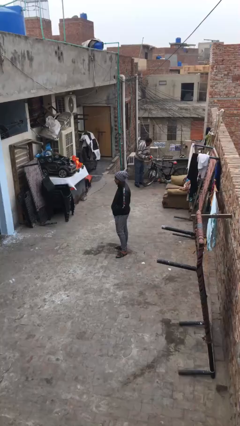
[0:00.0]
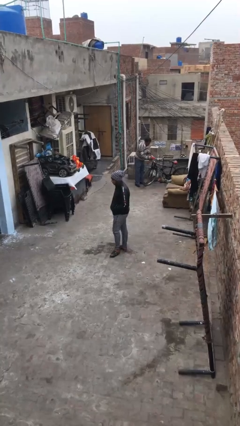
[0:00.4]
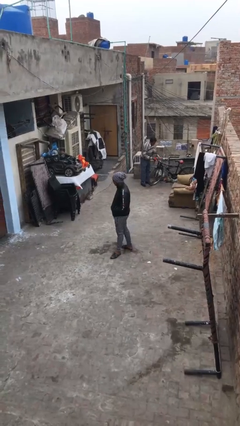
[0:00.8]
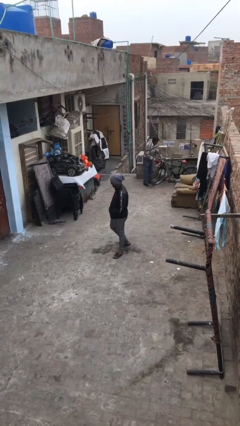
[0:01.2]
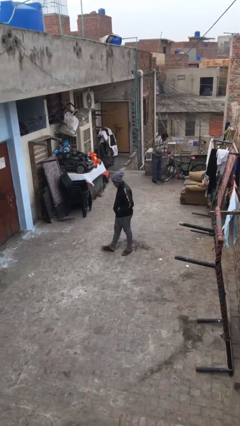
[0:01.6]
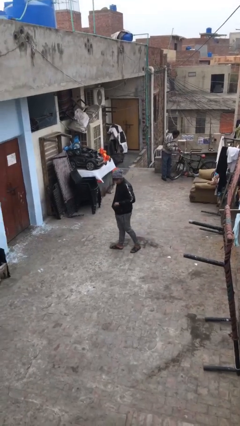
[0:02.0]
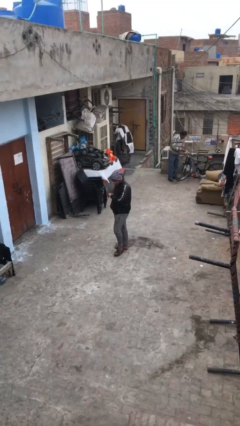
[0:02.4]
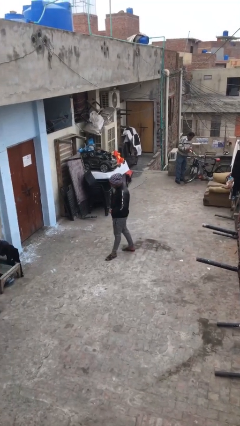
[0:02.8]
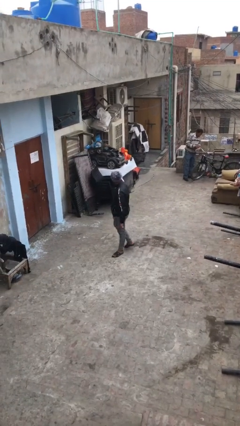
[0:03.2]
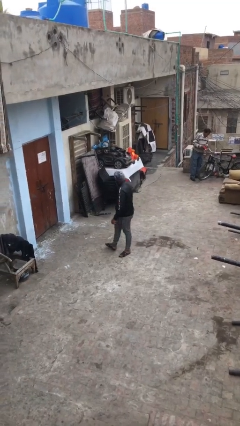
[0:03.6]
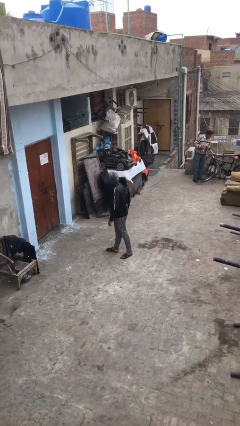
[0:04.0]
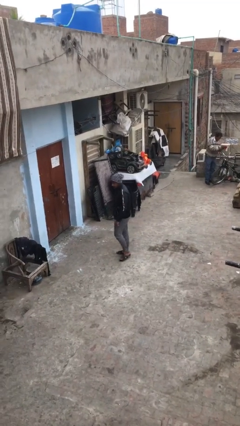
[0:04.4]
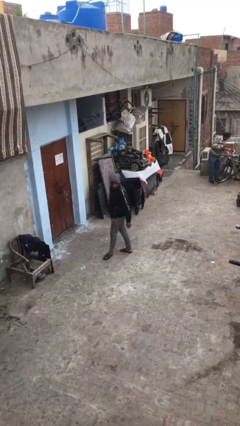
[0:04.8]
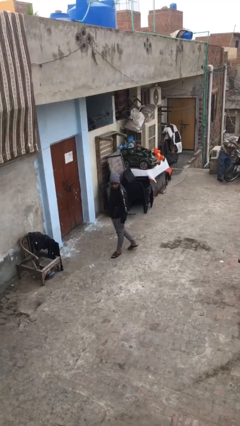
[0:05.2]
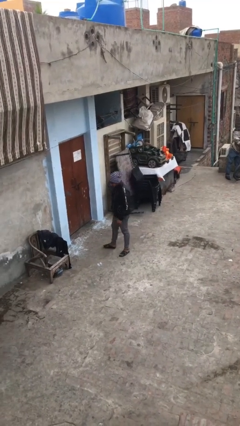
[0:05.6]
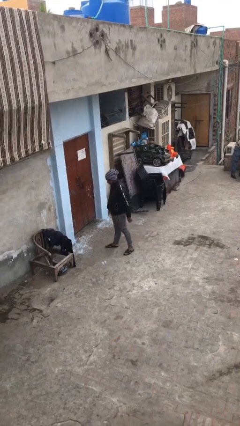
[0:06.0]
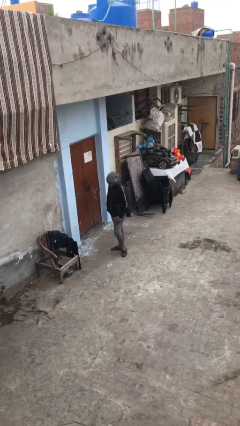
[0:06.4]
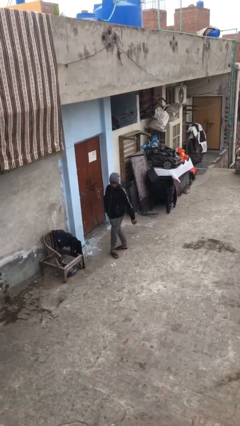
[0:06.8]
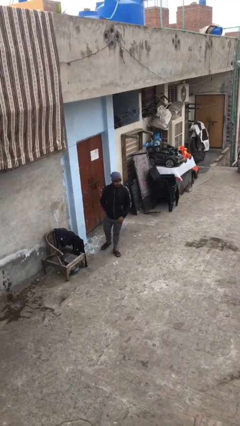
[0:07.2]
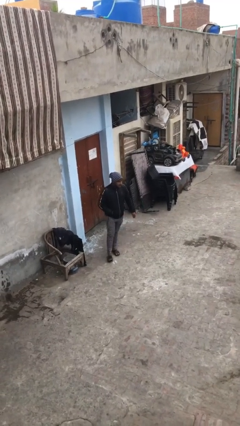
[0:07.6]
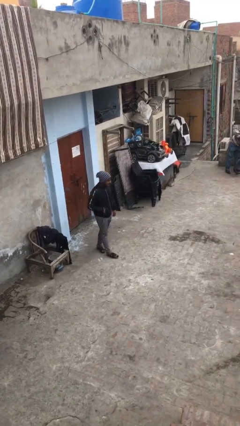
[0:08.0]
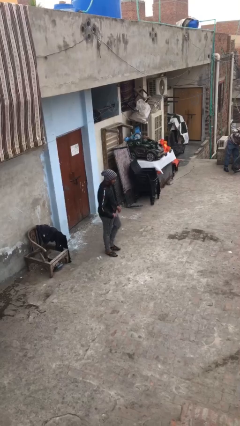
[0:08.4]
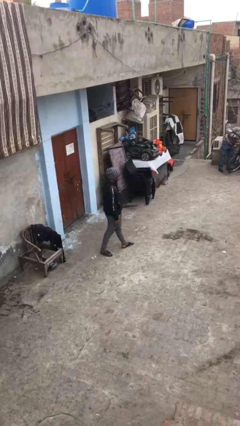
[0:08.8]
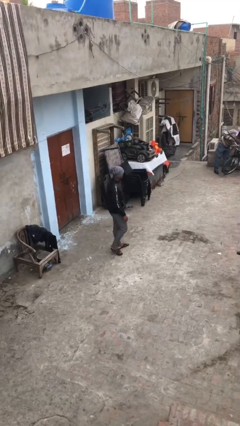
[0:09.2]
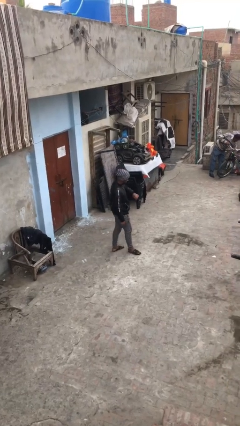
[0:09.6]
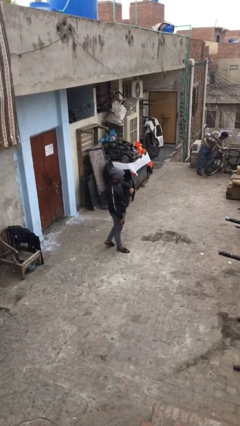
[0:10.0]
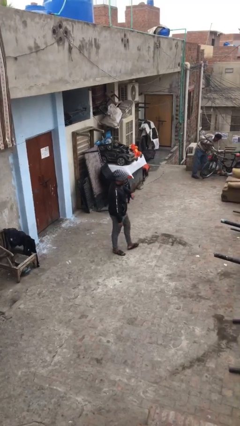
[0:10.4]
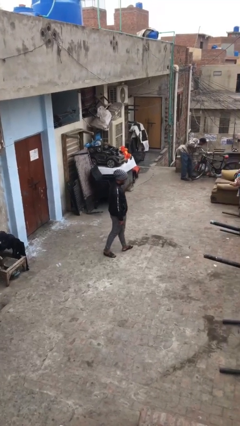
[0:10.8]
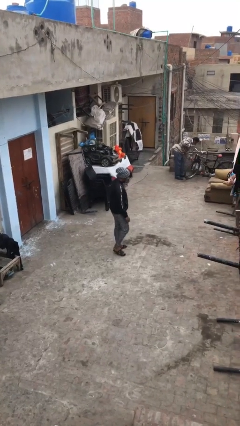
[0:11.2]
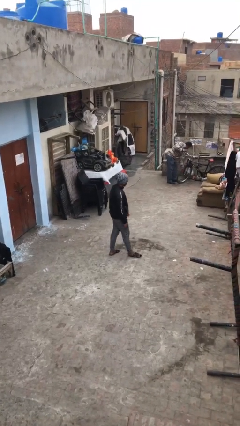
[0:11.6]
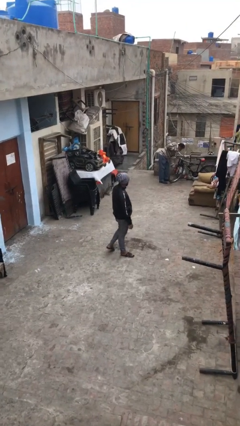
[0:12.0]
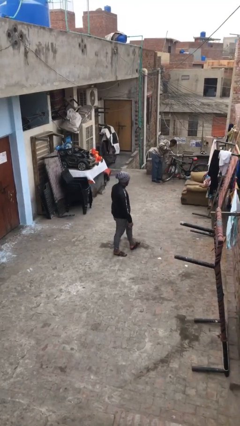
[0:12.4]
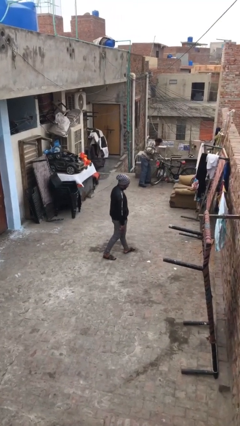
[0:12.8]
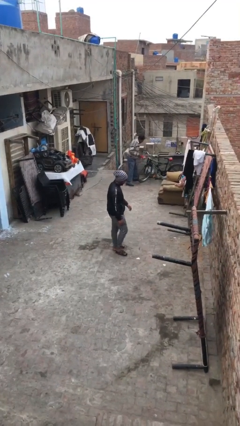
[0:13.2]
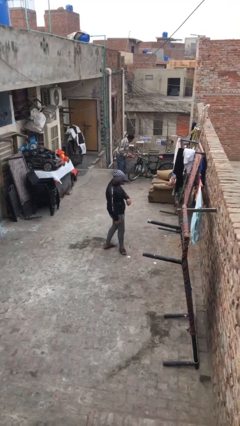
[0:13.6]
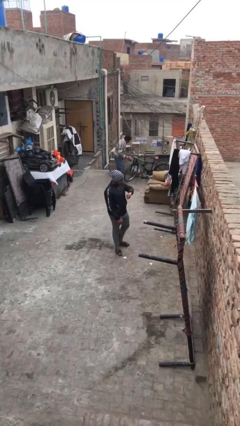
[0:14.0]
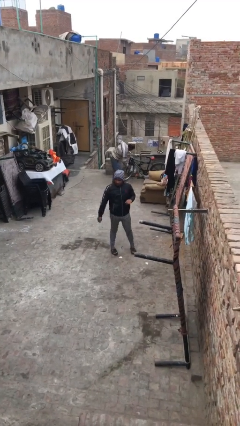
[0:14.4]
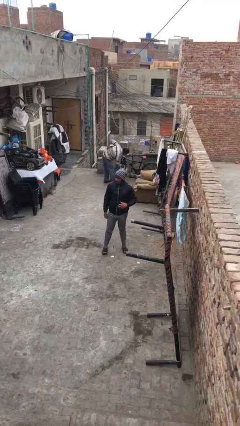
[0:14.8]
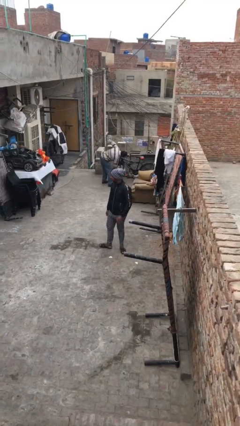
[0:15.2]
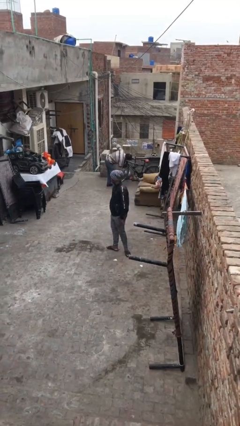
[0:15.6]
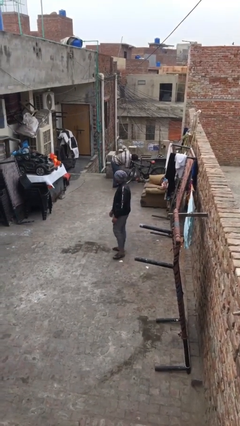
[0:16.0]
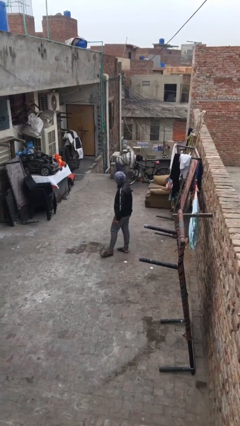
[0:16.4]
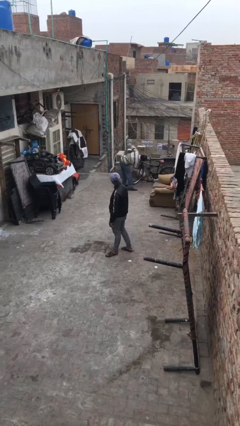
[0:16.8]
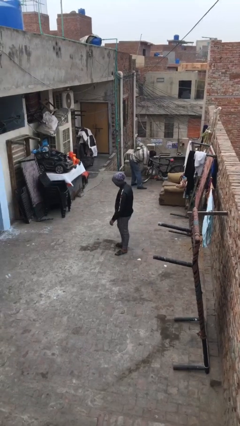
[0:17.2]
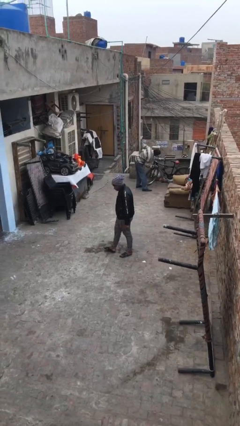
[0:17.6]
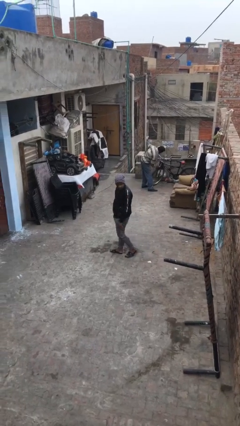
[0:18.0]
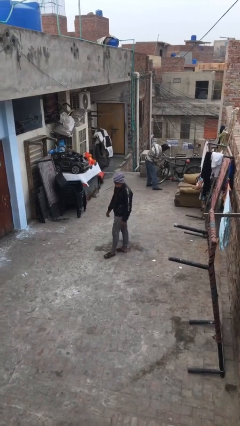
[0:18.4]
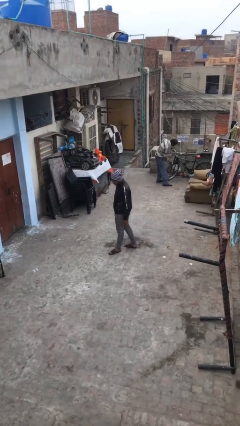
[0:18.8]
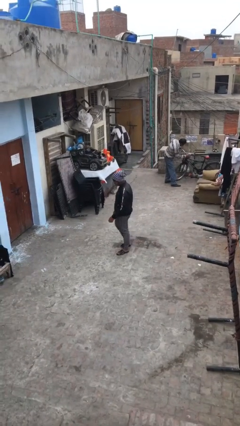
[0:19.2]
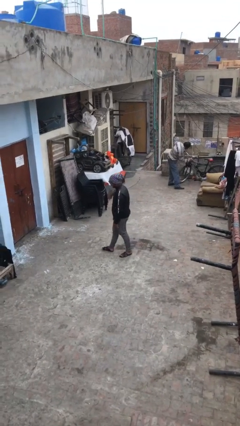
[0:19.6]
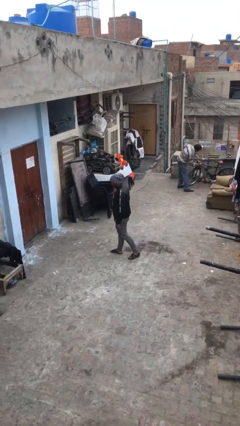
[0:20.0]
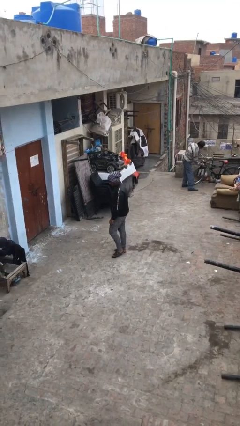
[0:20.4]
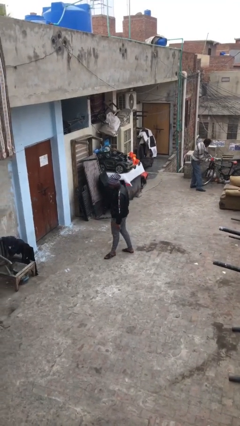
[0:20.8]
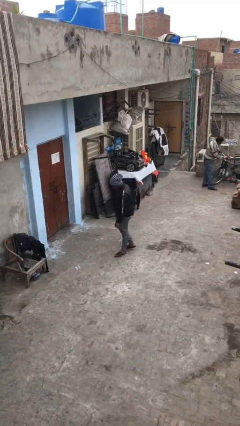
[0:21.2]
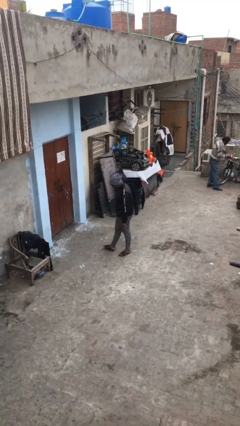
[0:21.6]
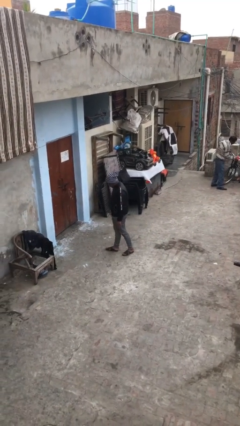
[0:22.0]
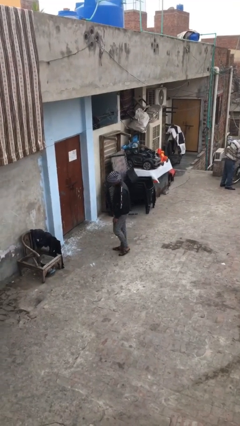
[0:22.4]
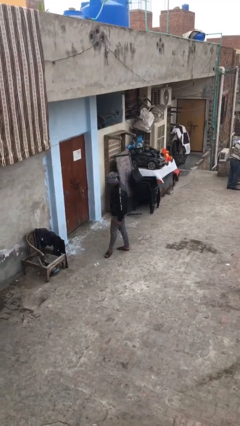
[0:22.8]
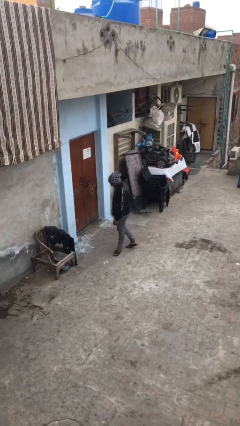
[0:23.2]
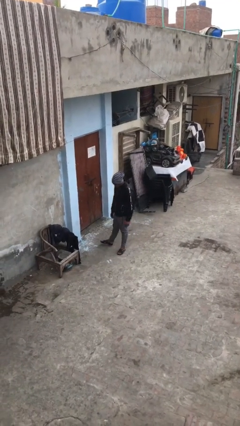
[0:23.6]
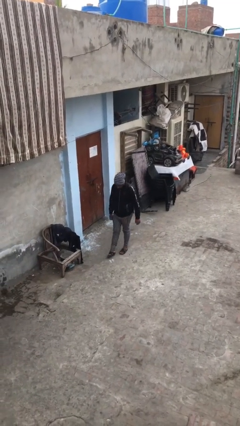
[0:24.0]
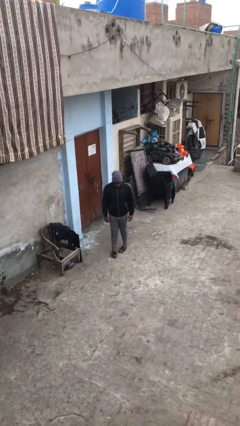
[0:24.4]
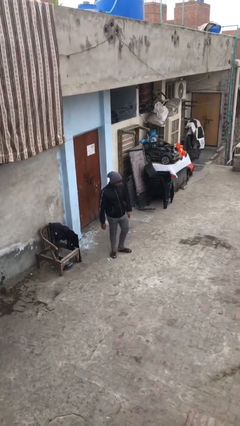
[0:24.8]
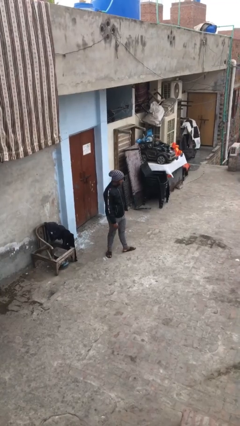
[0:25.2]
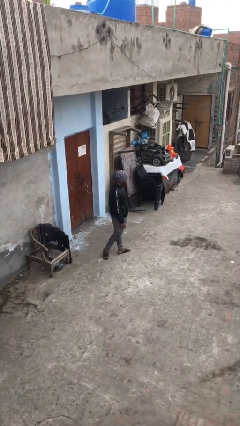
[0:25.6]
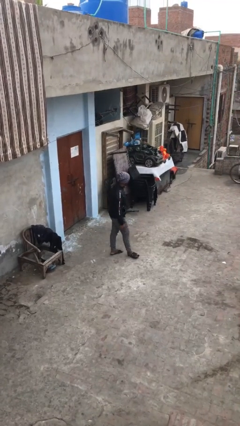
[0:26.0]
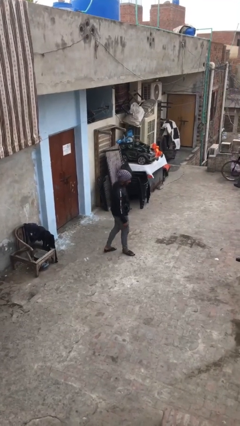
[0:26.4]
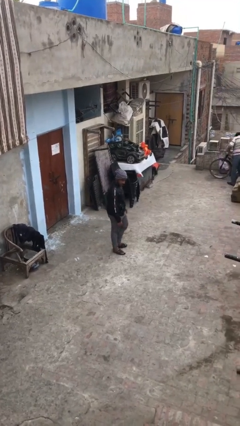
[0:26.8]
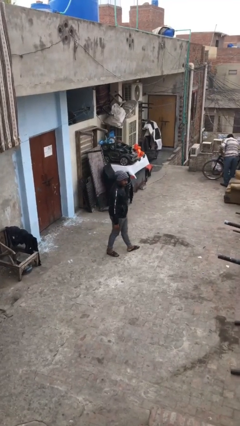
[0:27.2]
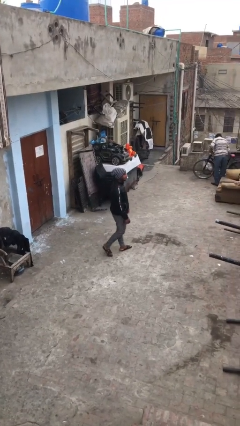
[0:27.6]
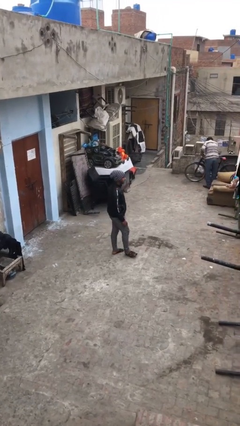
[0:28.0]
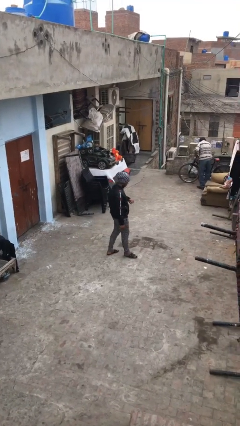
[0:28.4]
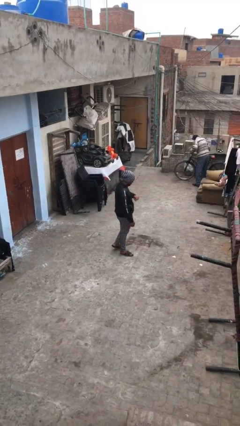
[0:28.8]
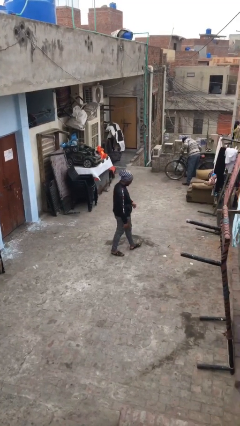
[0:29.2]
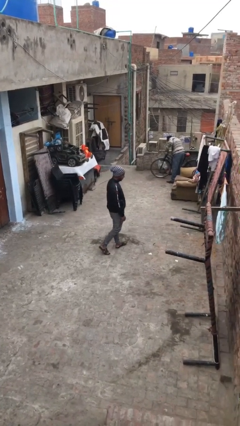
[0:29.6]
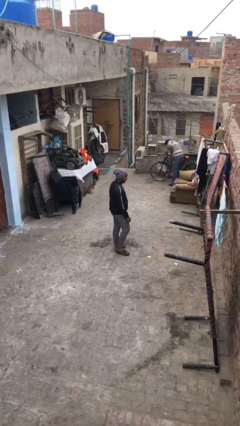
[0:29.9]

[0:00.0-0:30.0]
person walks

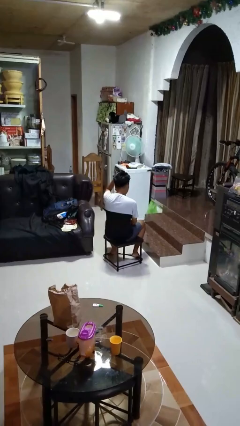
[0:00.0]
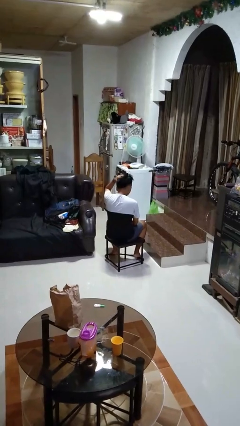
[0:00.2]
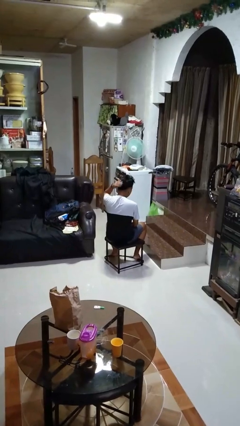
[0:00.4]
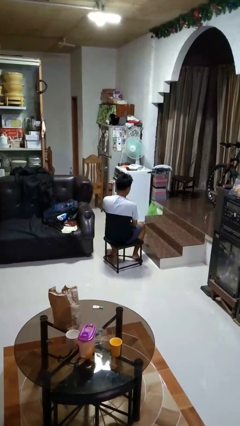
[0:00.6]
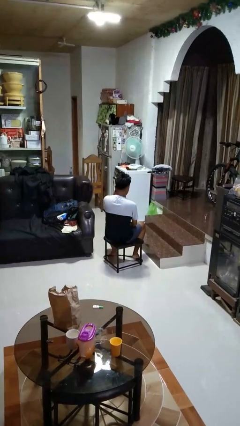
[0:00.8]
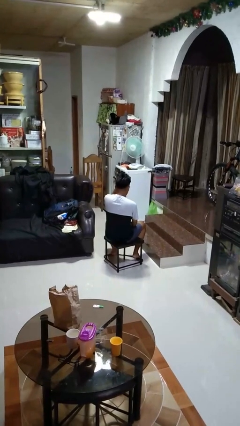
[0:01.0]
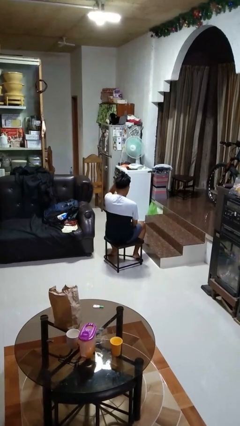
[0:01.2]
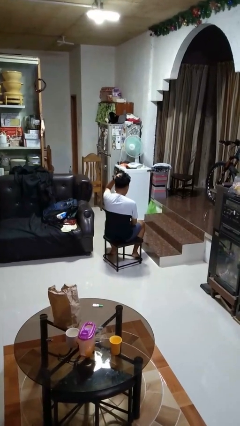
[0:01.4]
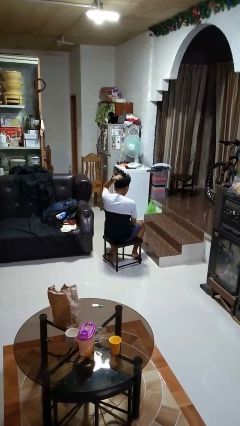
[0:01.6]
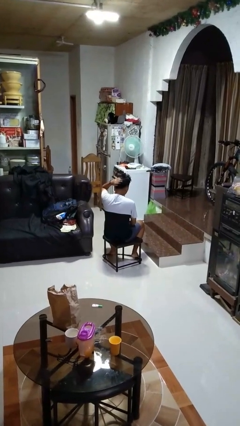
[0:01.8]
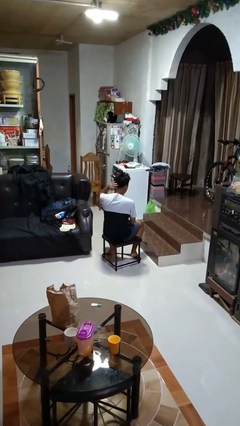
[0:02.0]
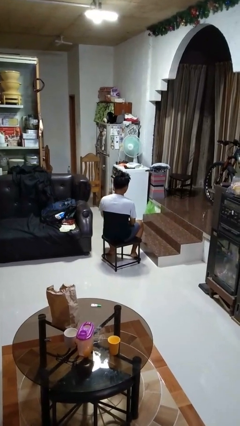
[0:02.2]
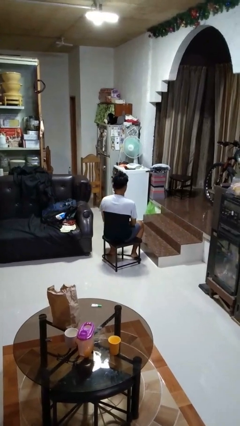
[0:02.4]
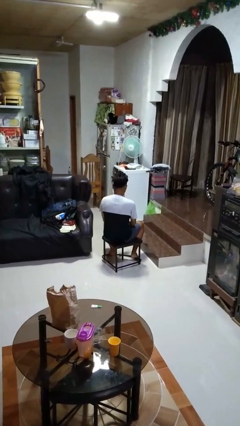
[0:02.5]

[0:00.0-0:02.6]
person strokes hair

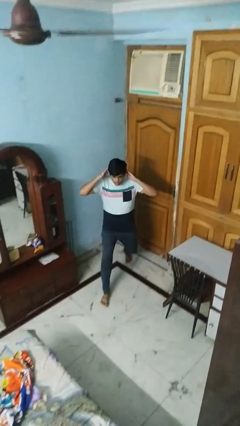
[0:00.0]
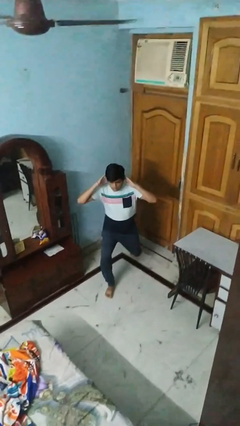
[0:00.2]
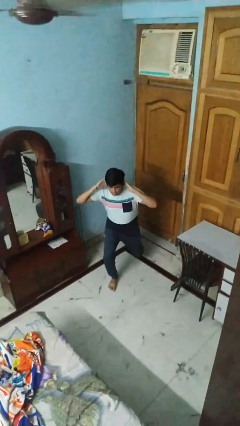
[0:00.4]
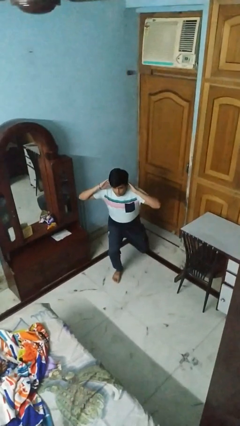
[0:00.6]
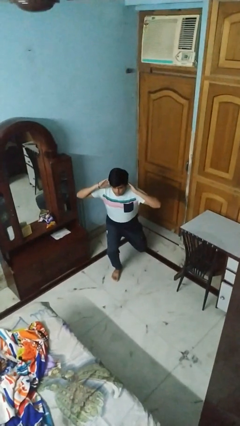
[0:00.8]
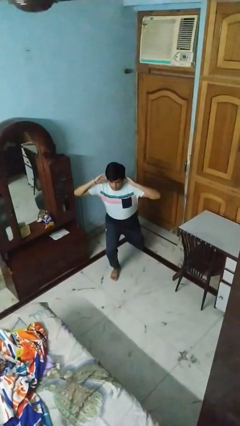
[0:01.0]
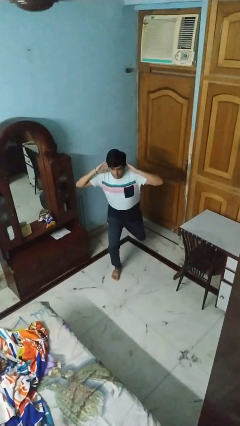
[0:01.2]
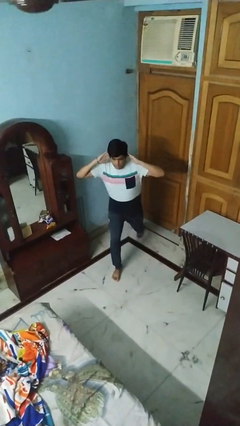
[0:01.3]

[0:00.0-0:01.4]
person exercises with lunges
